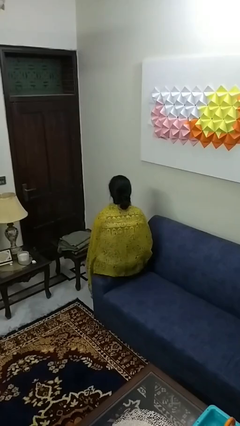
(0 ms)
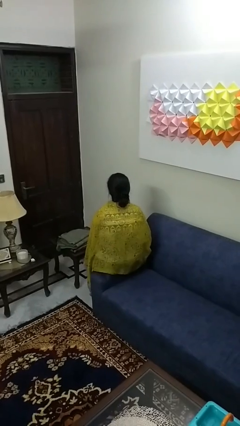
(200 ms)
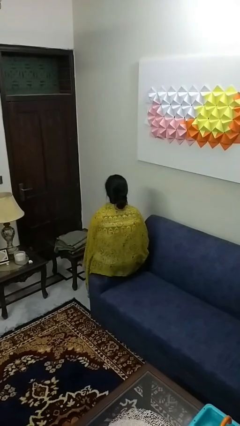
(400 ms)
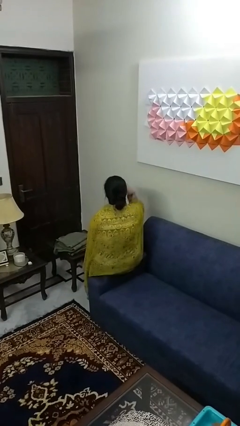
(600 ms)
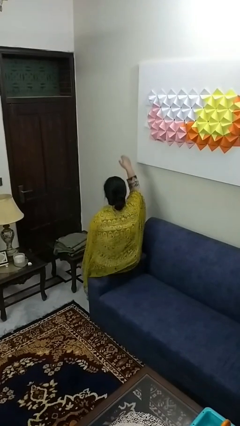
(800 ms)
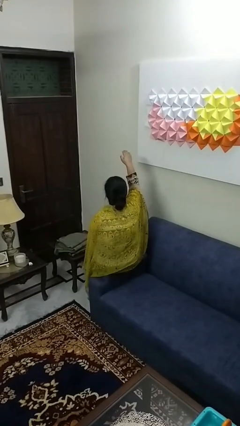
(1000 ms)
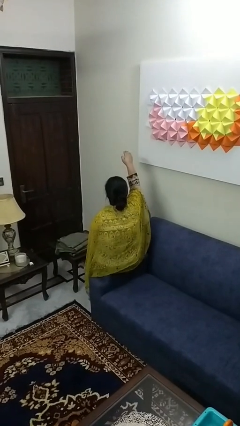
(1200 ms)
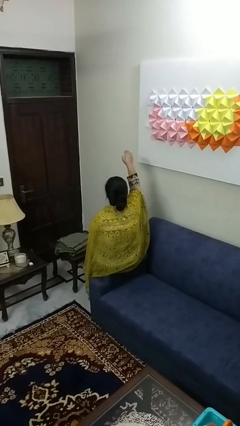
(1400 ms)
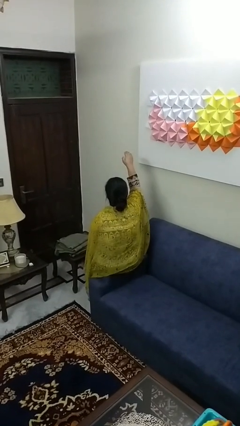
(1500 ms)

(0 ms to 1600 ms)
person gestures swipe up

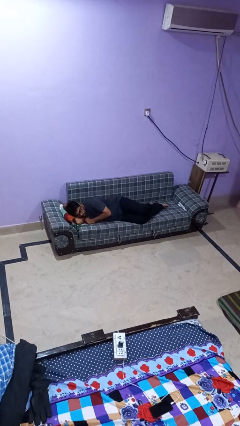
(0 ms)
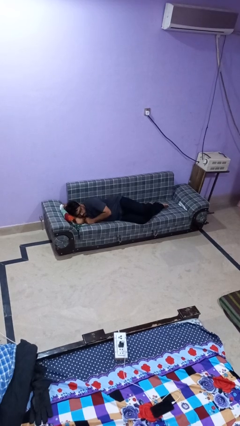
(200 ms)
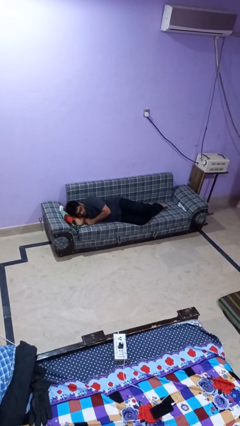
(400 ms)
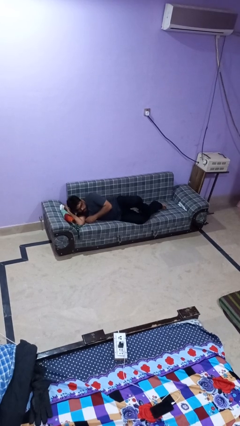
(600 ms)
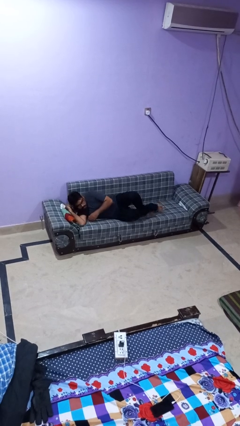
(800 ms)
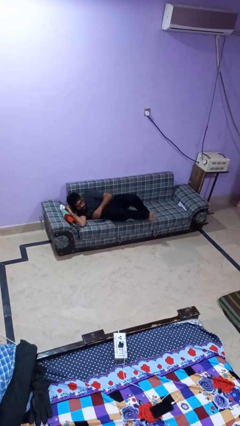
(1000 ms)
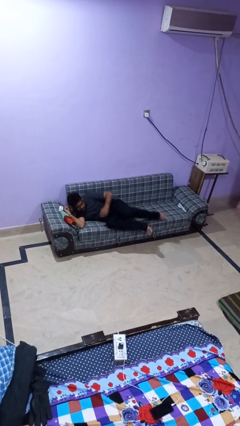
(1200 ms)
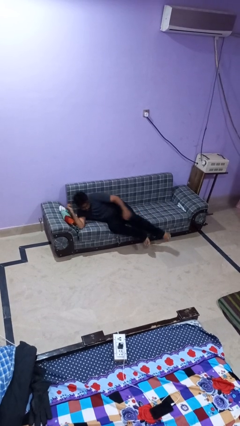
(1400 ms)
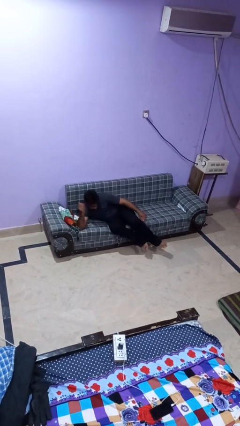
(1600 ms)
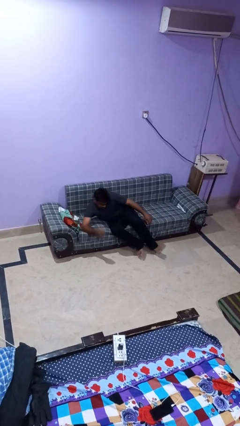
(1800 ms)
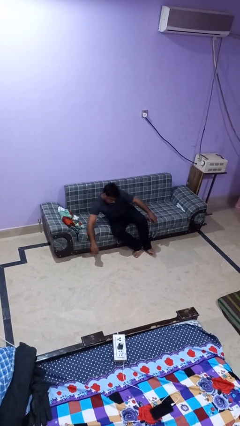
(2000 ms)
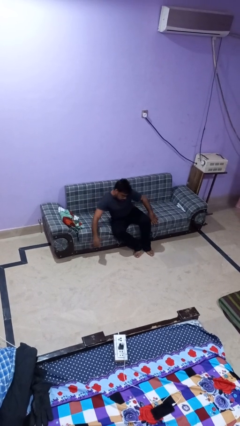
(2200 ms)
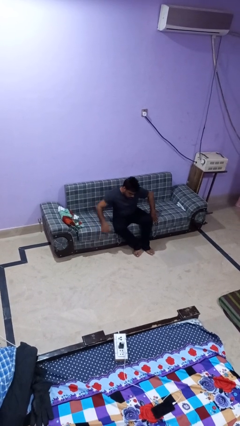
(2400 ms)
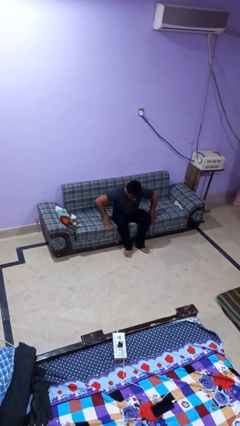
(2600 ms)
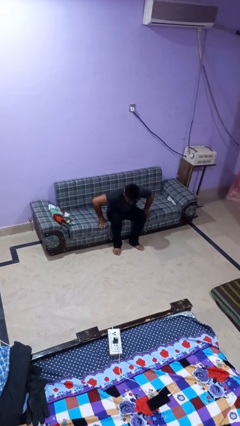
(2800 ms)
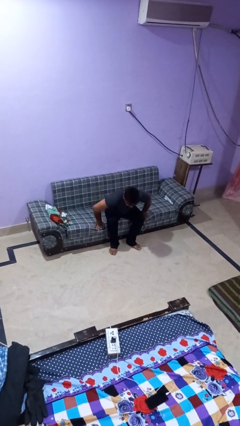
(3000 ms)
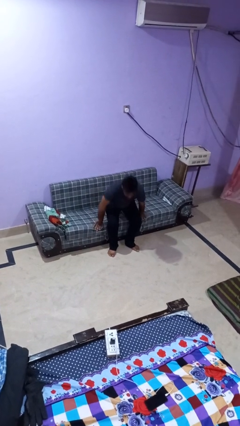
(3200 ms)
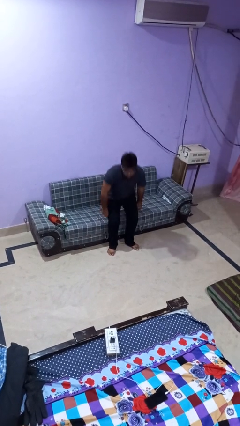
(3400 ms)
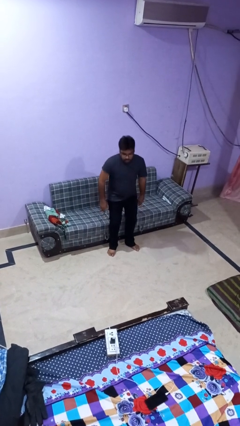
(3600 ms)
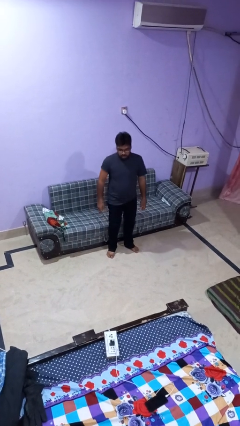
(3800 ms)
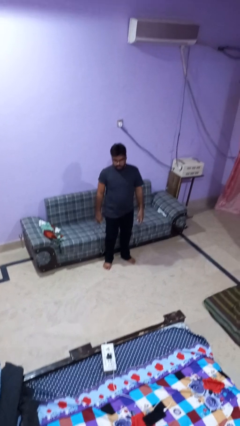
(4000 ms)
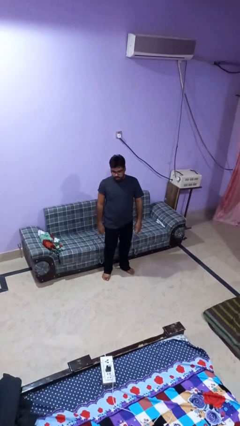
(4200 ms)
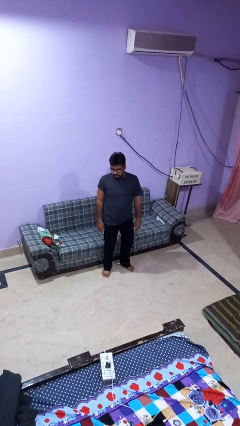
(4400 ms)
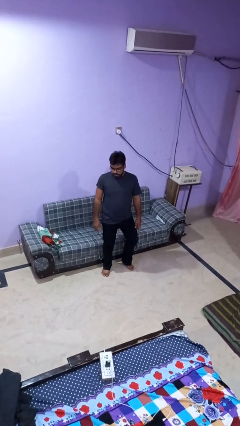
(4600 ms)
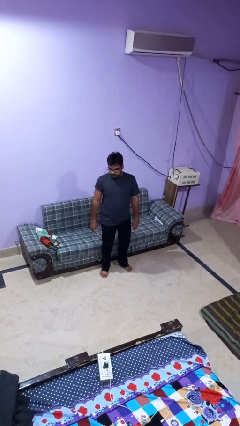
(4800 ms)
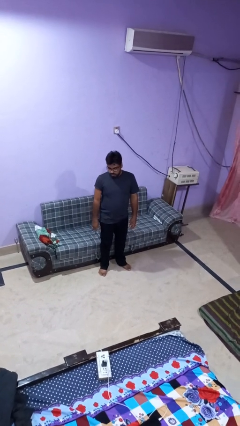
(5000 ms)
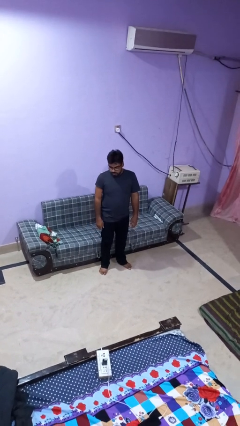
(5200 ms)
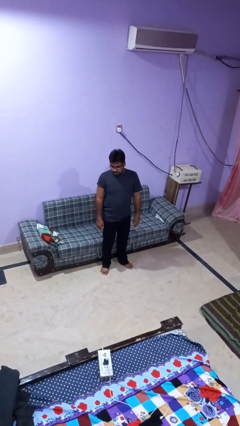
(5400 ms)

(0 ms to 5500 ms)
person stands up

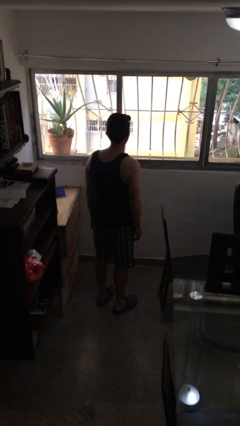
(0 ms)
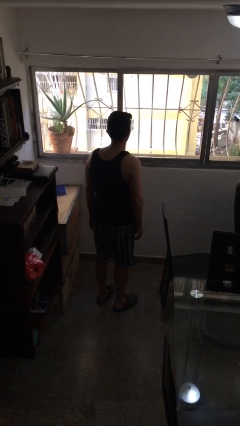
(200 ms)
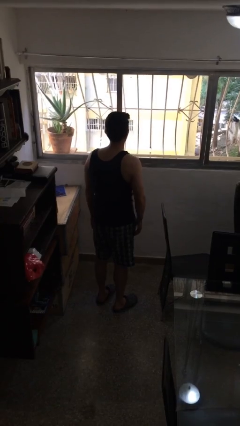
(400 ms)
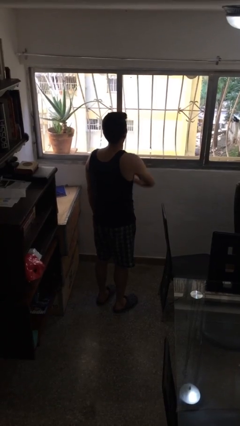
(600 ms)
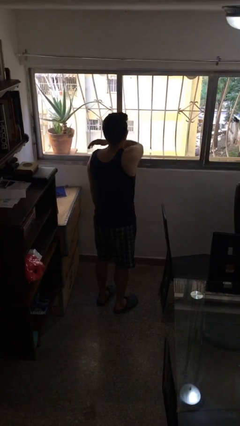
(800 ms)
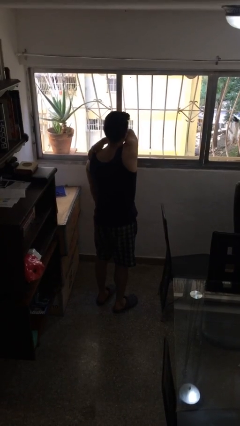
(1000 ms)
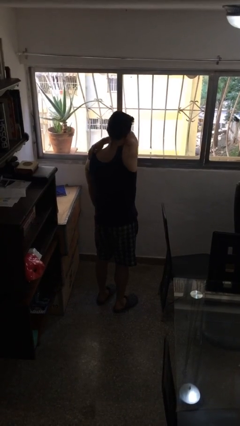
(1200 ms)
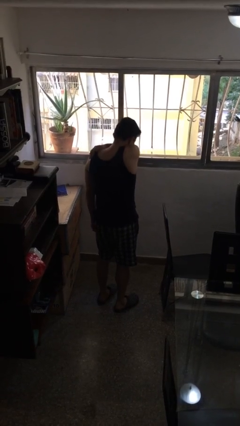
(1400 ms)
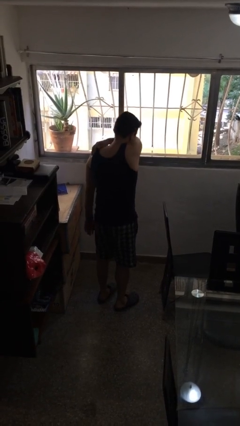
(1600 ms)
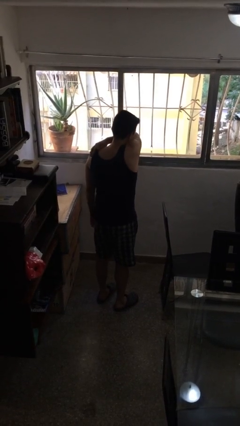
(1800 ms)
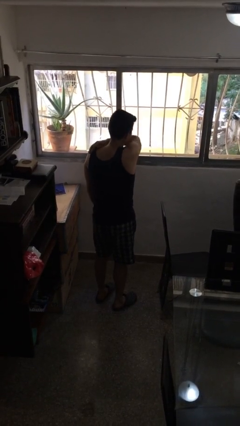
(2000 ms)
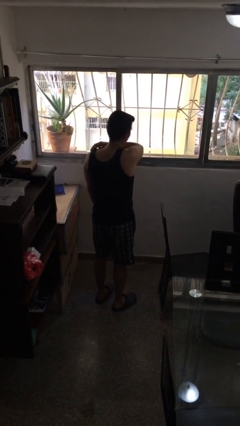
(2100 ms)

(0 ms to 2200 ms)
person sneezes into arm

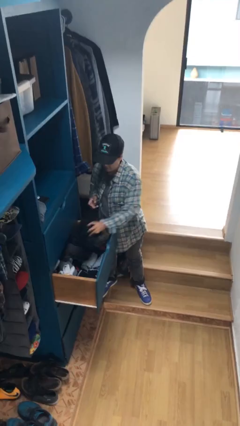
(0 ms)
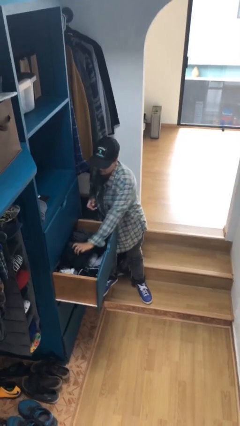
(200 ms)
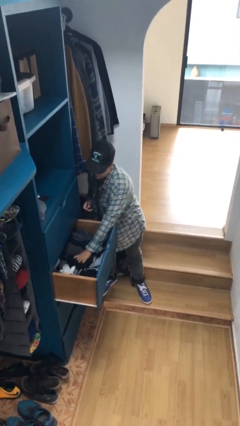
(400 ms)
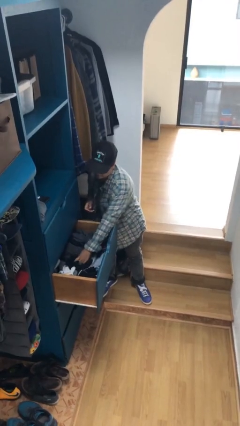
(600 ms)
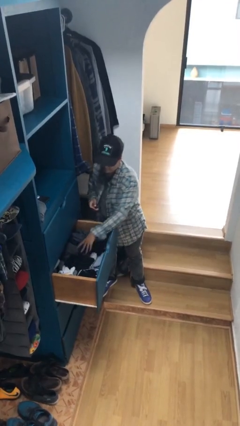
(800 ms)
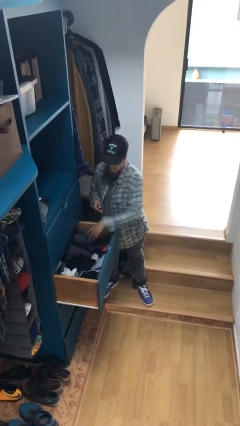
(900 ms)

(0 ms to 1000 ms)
person puts clothes into dresser

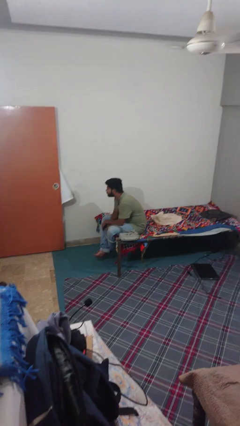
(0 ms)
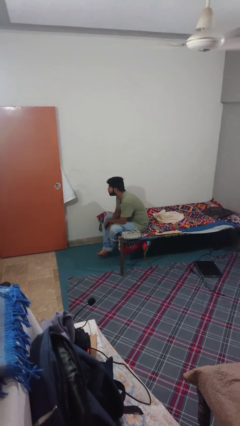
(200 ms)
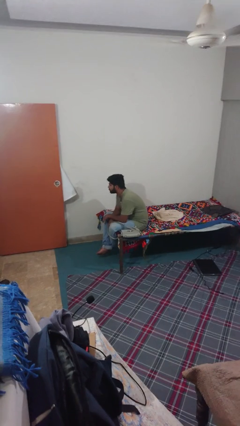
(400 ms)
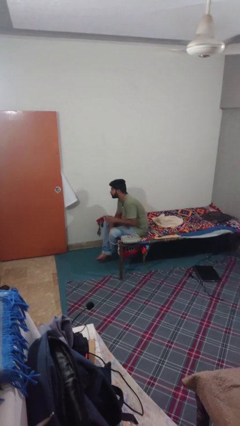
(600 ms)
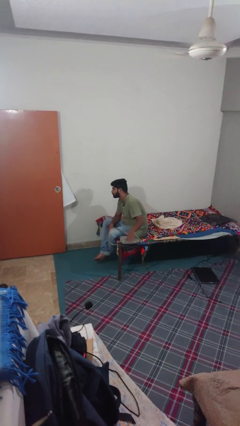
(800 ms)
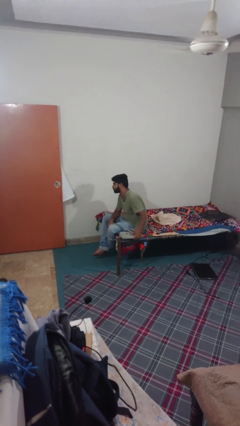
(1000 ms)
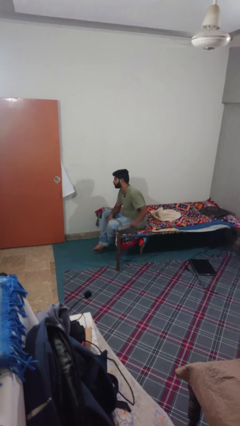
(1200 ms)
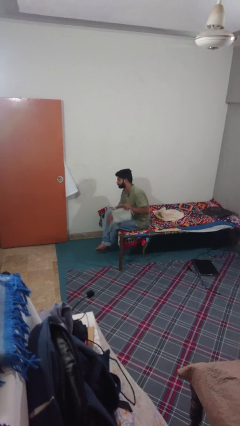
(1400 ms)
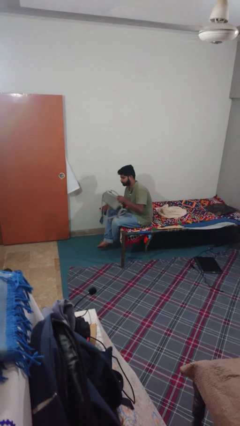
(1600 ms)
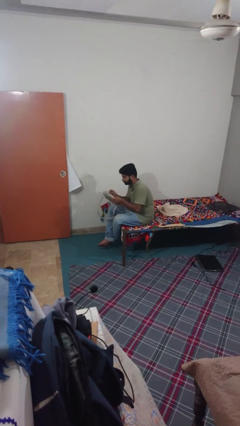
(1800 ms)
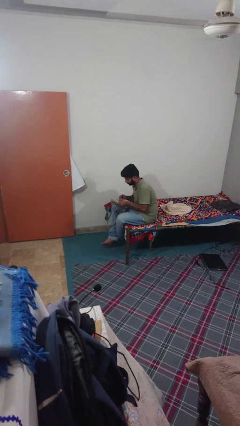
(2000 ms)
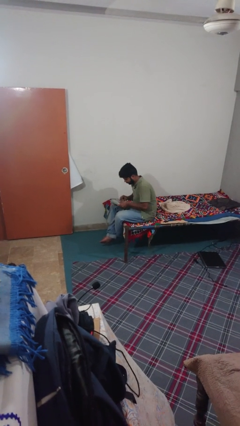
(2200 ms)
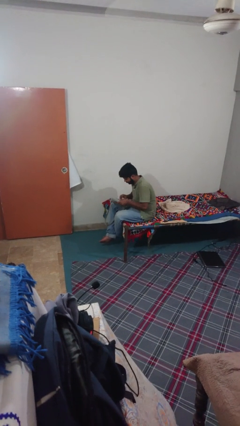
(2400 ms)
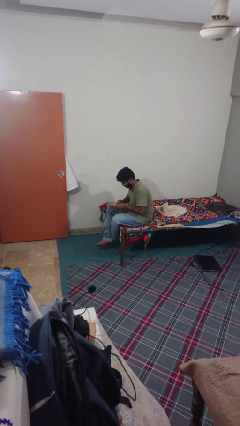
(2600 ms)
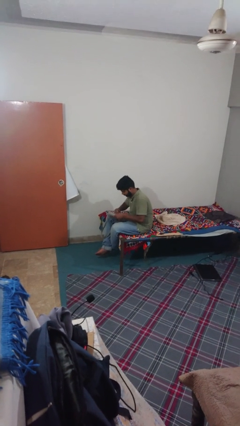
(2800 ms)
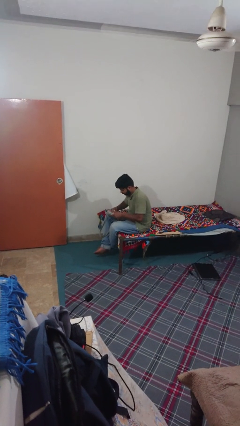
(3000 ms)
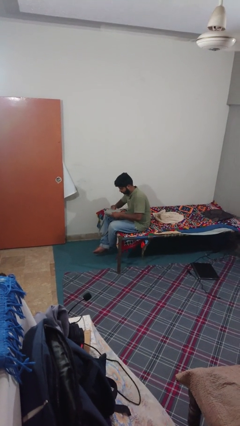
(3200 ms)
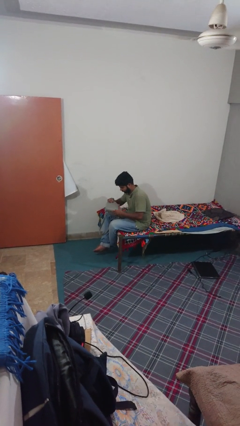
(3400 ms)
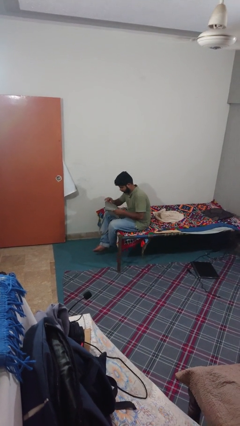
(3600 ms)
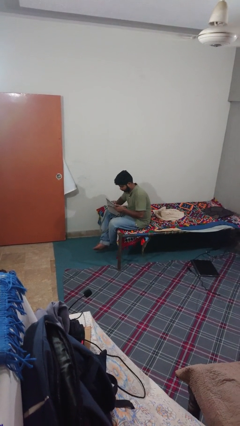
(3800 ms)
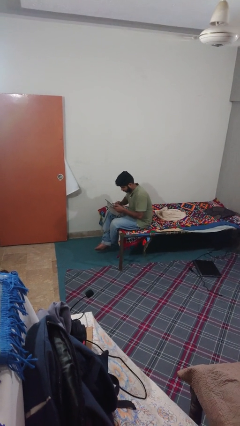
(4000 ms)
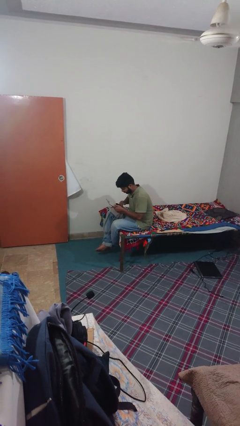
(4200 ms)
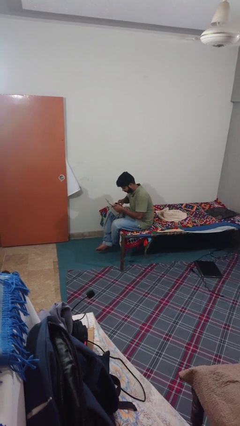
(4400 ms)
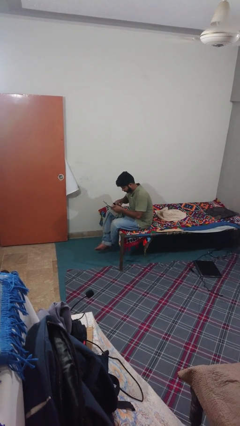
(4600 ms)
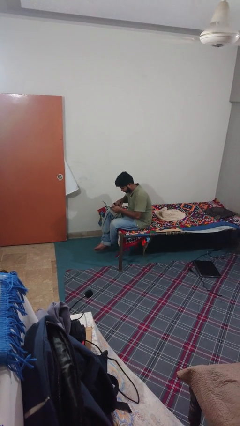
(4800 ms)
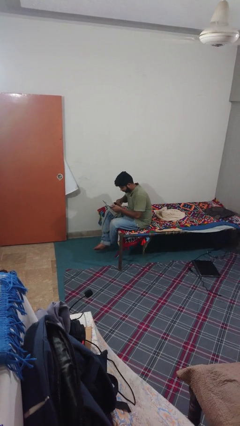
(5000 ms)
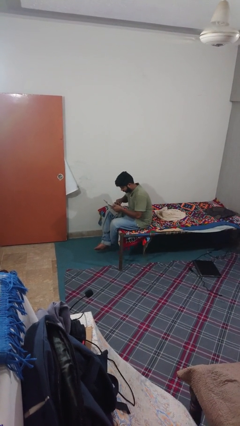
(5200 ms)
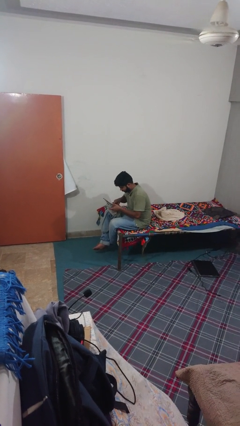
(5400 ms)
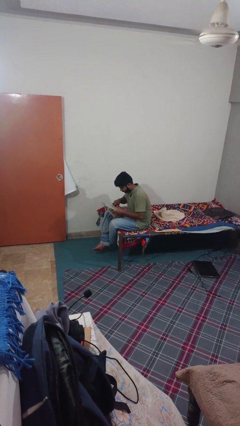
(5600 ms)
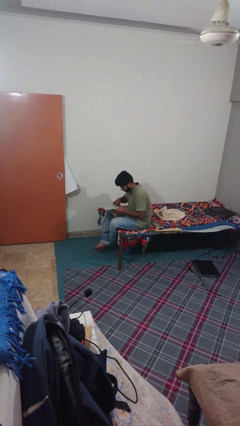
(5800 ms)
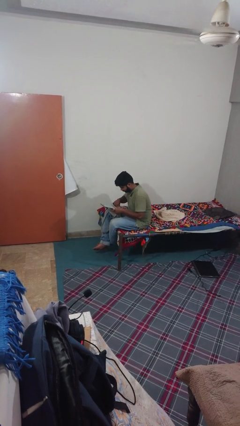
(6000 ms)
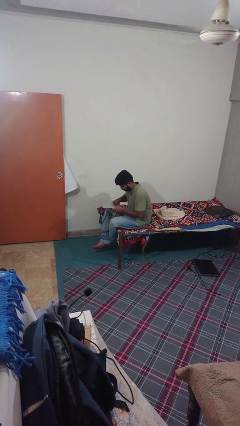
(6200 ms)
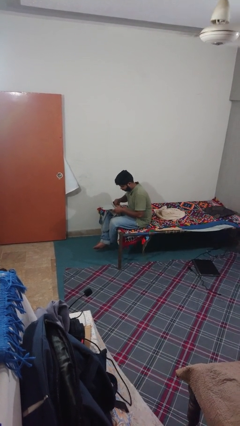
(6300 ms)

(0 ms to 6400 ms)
person searches in purse

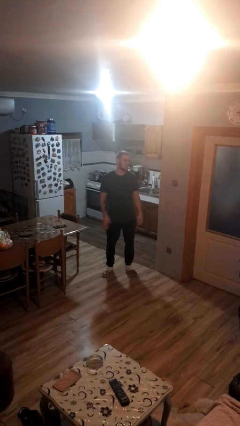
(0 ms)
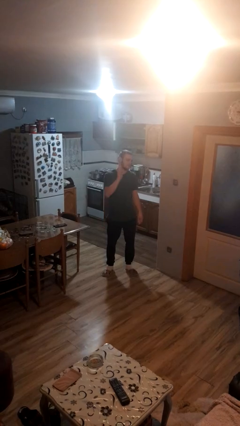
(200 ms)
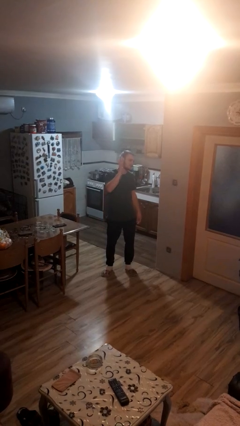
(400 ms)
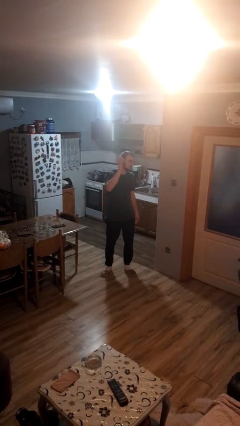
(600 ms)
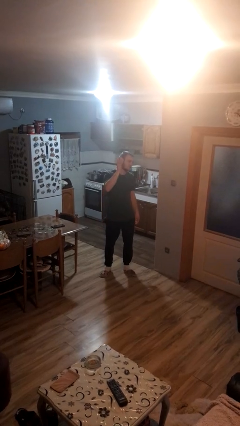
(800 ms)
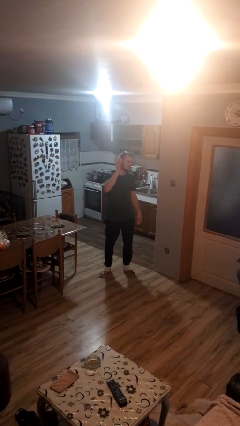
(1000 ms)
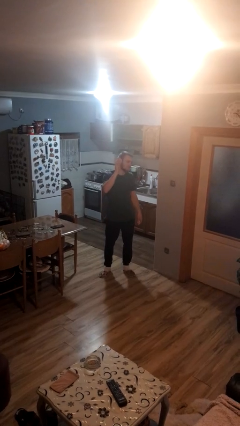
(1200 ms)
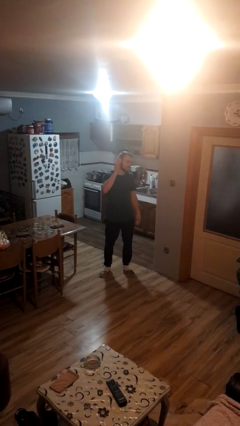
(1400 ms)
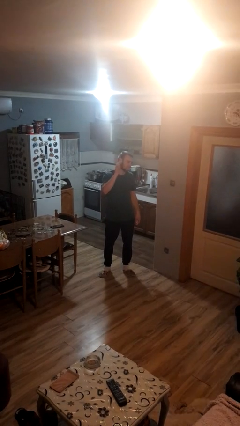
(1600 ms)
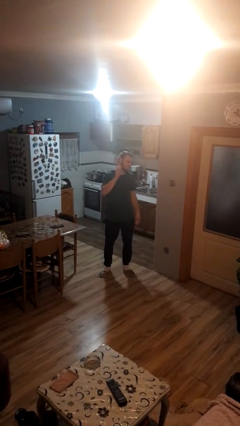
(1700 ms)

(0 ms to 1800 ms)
person waves at person
